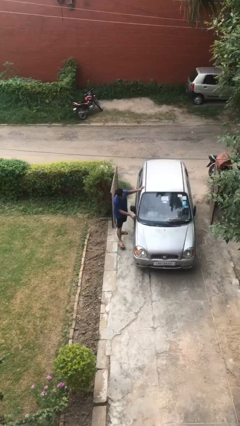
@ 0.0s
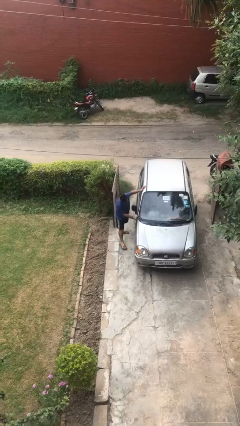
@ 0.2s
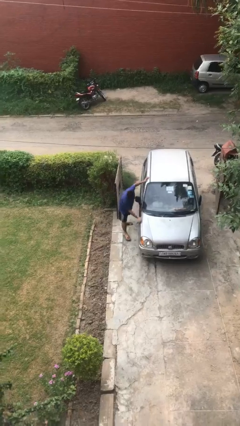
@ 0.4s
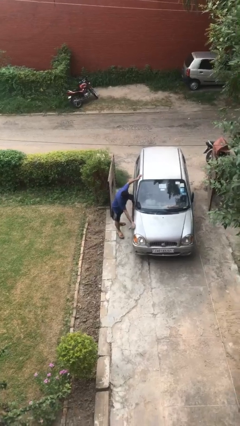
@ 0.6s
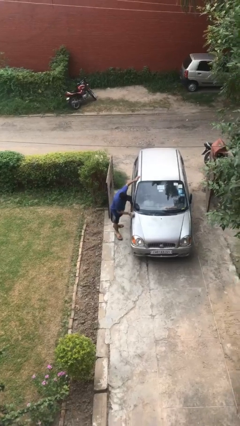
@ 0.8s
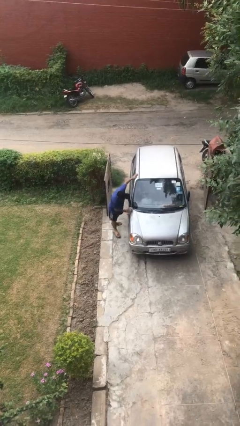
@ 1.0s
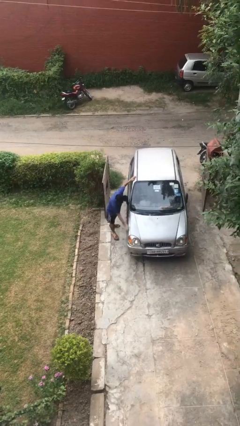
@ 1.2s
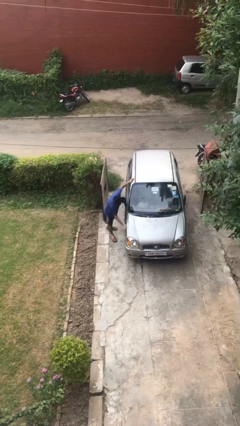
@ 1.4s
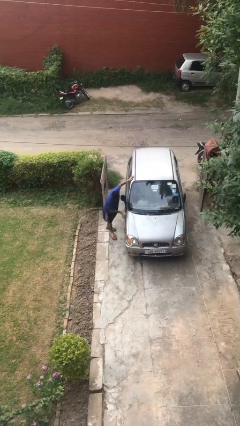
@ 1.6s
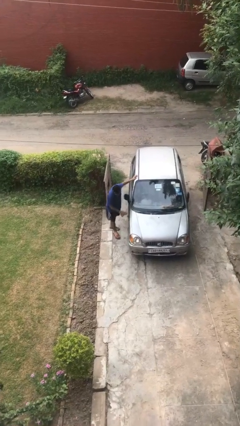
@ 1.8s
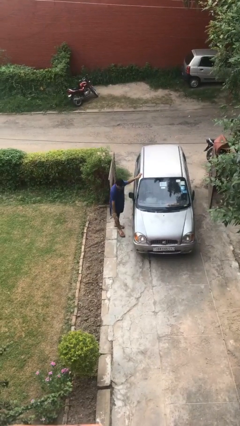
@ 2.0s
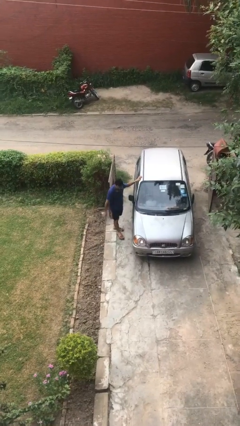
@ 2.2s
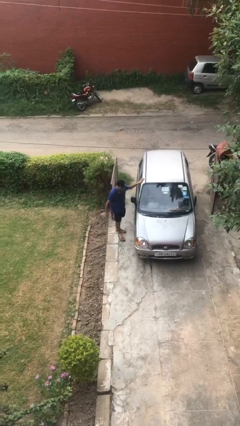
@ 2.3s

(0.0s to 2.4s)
person polishes car with rag

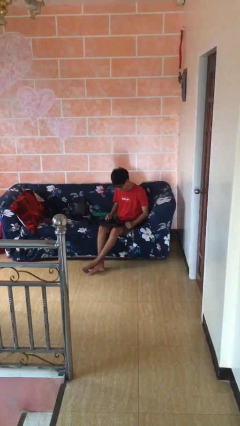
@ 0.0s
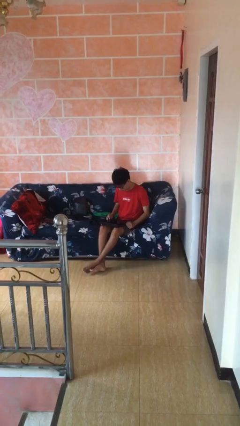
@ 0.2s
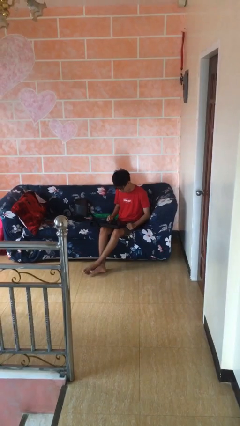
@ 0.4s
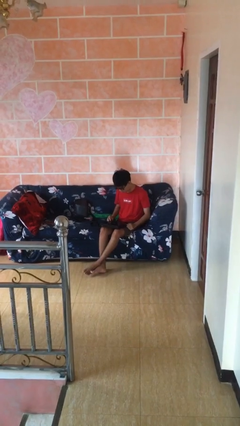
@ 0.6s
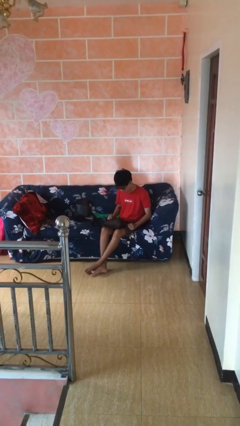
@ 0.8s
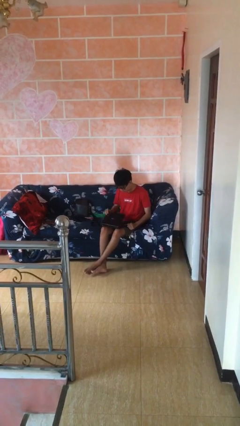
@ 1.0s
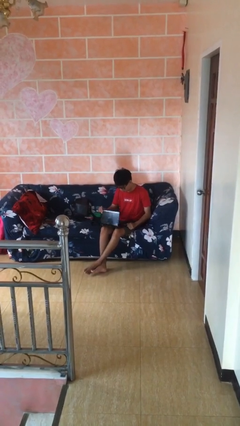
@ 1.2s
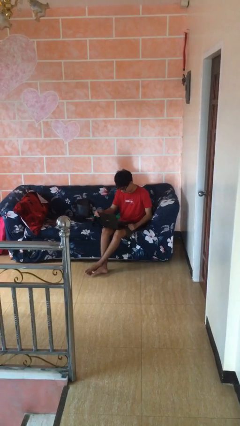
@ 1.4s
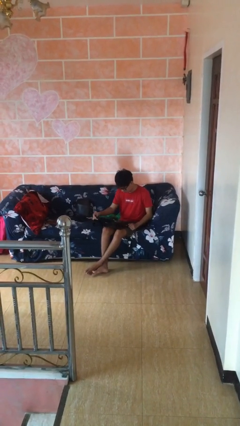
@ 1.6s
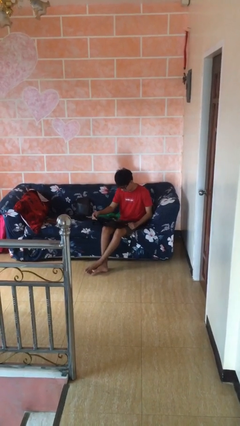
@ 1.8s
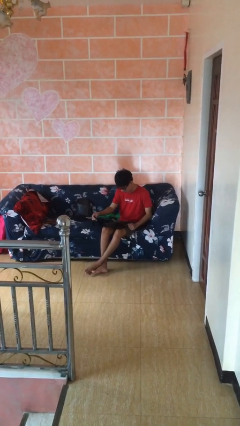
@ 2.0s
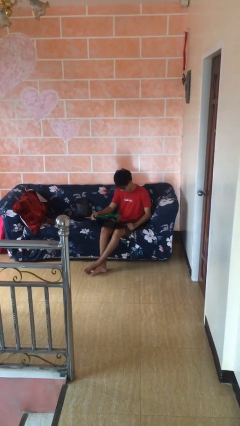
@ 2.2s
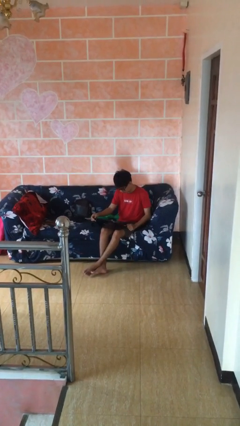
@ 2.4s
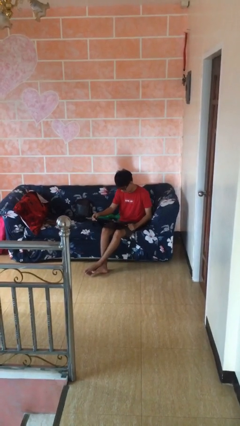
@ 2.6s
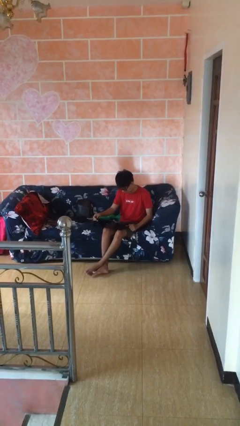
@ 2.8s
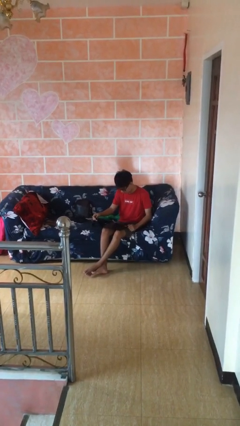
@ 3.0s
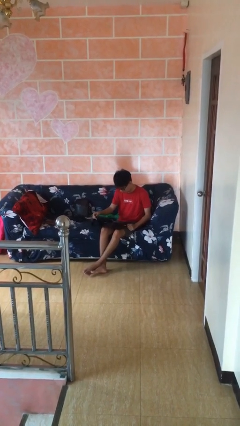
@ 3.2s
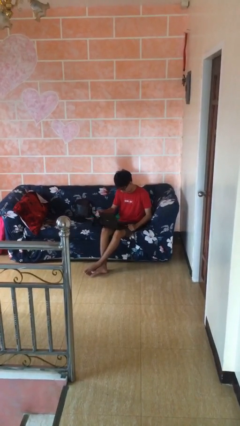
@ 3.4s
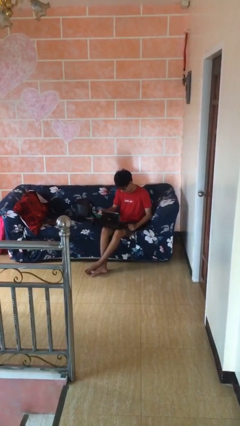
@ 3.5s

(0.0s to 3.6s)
person interacts with laptop

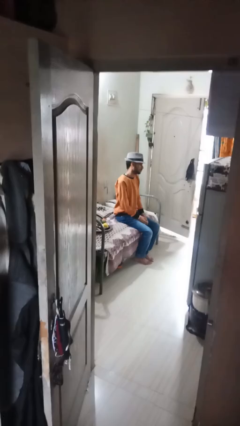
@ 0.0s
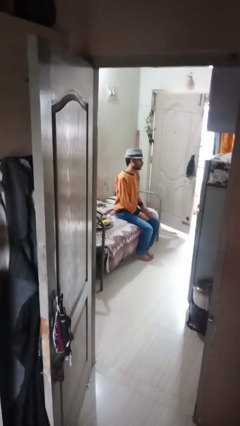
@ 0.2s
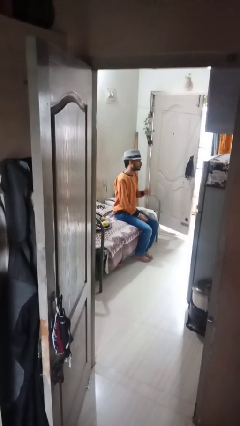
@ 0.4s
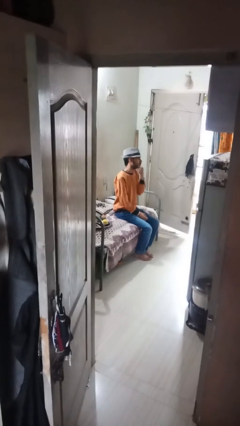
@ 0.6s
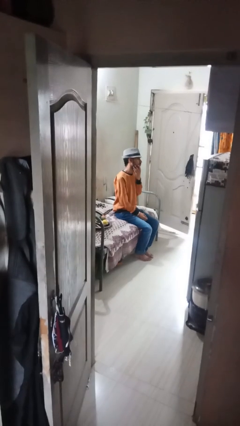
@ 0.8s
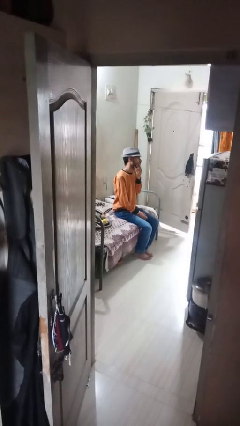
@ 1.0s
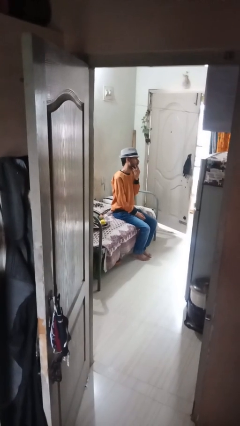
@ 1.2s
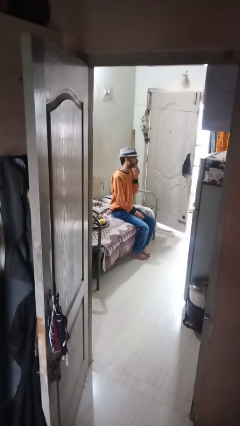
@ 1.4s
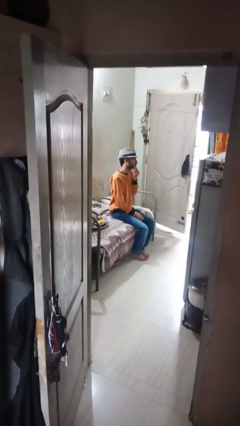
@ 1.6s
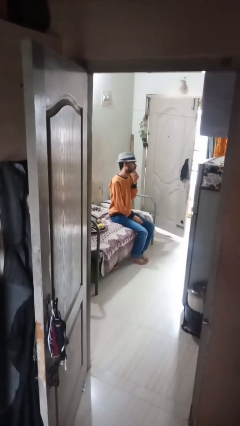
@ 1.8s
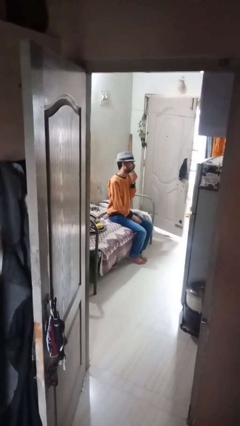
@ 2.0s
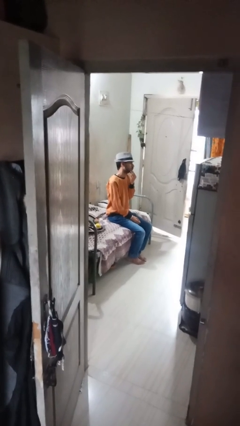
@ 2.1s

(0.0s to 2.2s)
person strokes chin

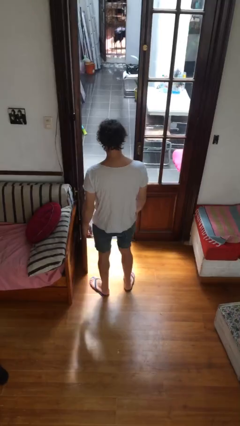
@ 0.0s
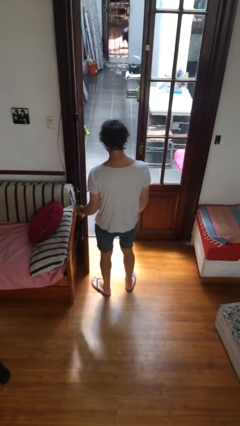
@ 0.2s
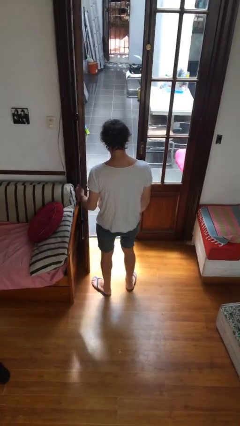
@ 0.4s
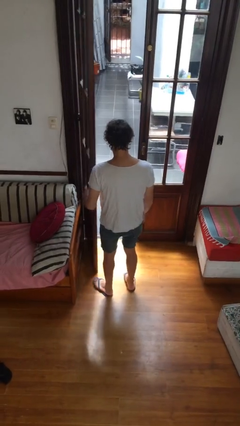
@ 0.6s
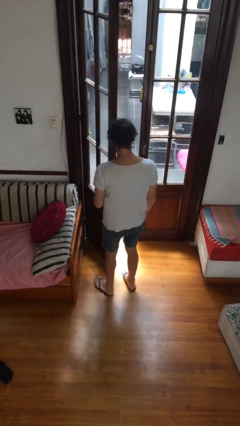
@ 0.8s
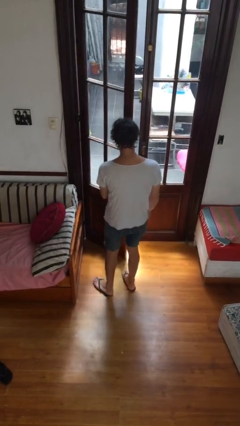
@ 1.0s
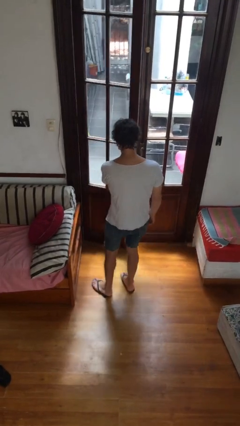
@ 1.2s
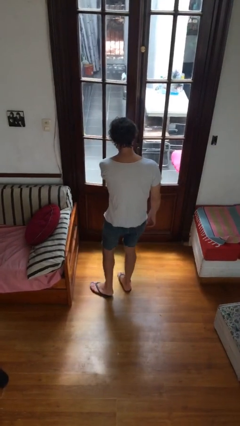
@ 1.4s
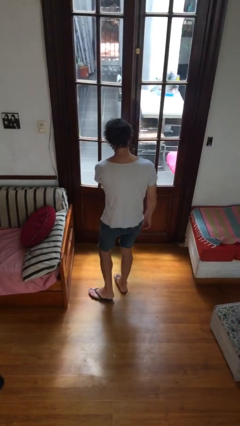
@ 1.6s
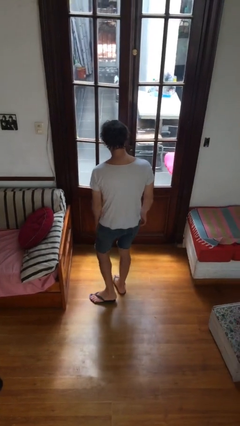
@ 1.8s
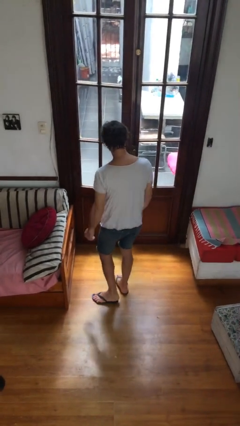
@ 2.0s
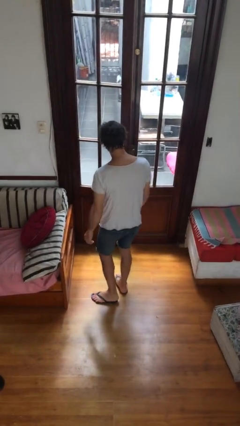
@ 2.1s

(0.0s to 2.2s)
person closes facility door

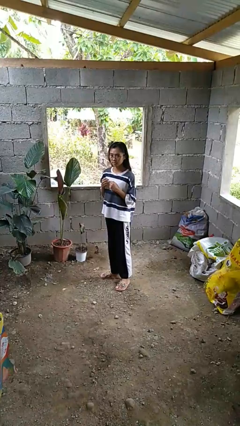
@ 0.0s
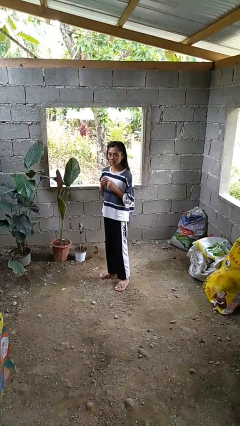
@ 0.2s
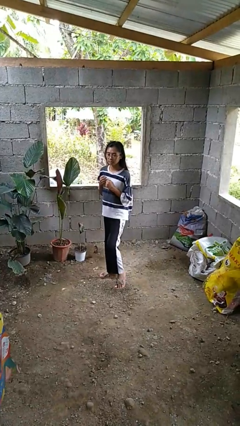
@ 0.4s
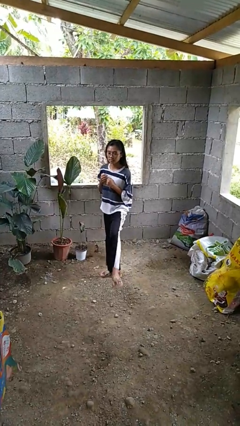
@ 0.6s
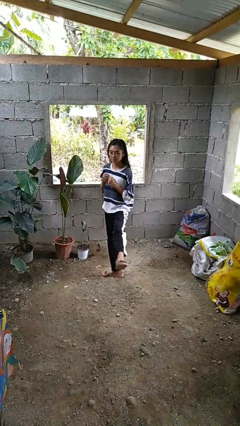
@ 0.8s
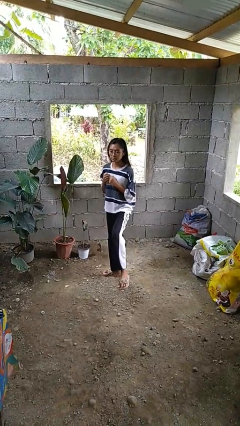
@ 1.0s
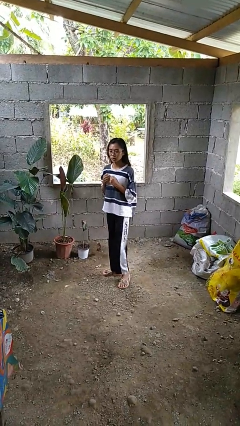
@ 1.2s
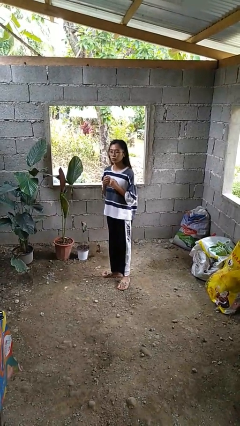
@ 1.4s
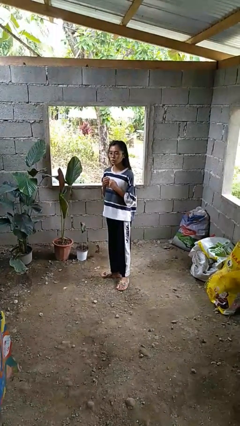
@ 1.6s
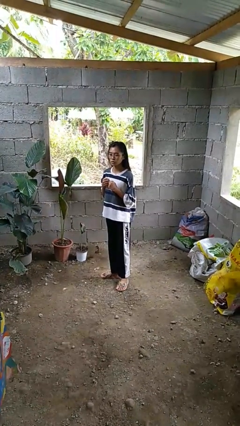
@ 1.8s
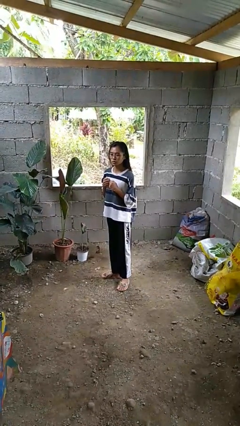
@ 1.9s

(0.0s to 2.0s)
person karate kicks

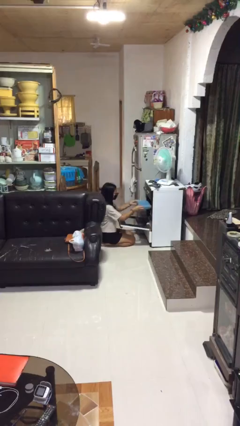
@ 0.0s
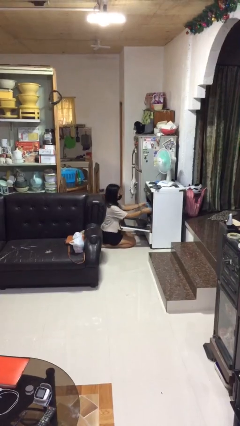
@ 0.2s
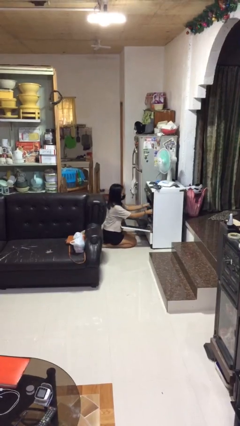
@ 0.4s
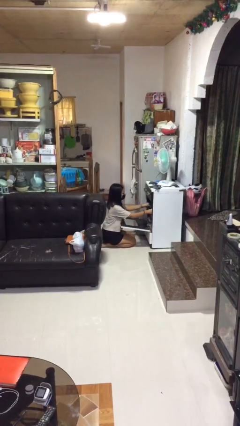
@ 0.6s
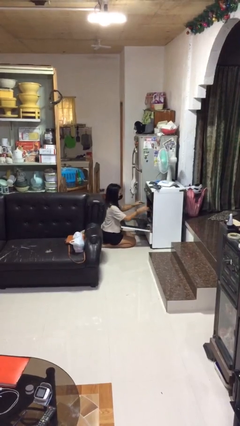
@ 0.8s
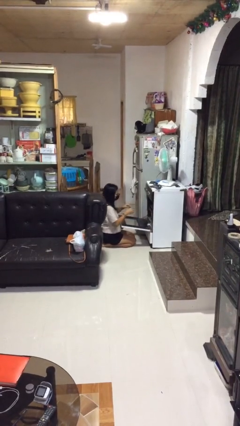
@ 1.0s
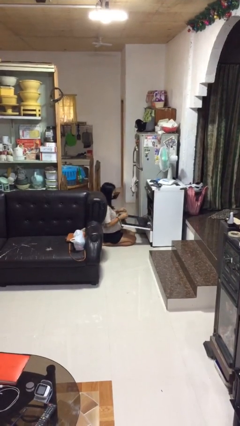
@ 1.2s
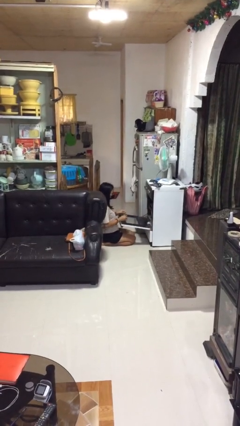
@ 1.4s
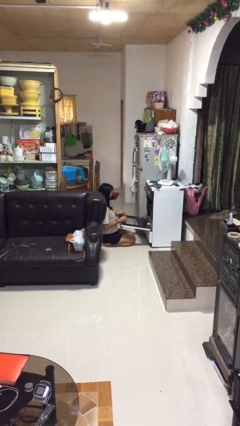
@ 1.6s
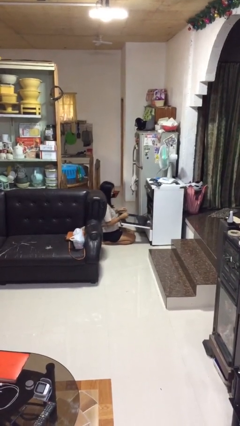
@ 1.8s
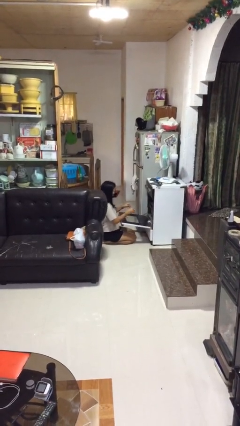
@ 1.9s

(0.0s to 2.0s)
person puts object into oven

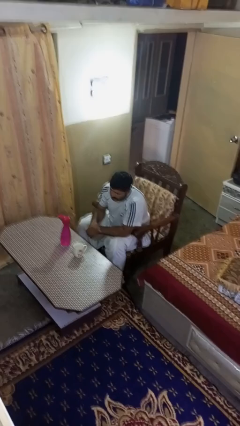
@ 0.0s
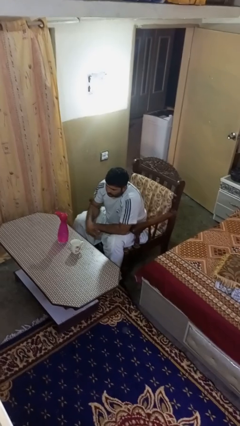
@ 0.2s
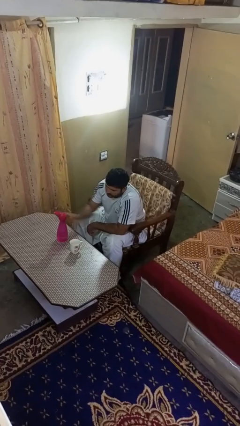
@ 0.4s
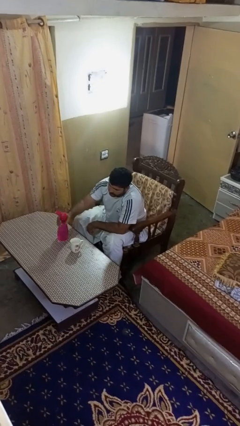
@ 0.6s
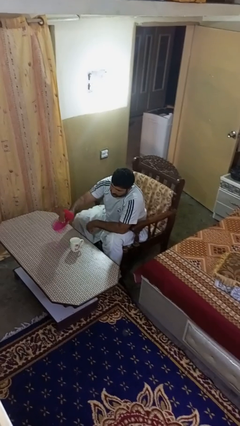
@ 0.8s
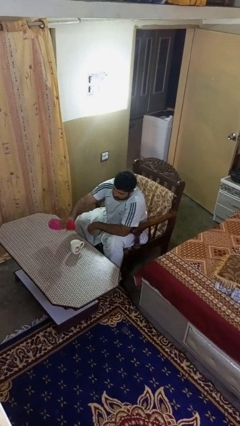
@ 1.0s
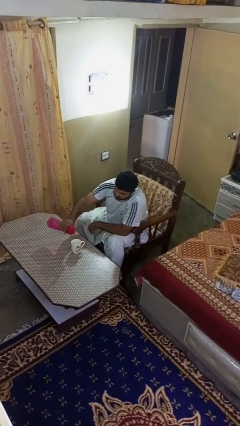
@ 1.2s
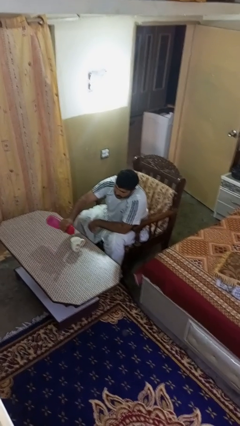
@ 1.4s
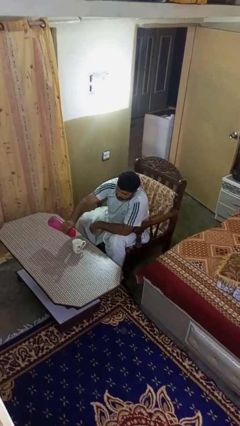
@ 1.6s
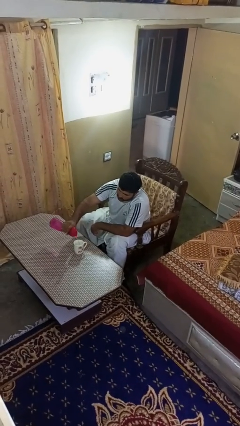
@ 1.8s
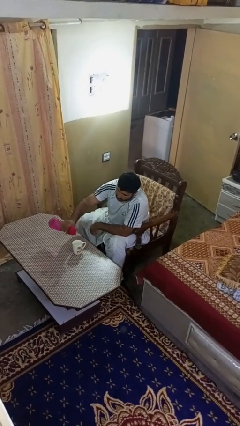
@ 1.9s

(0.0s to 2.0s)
person pours liquid into cup

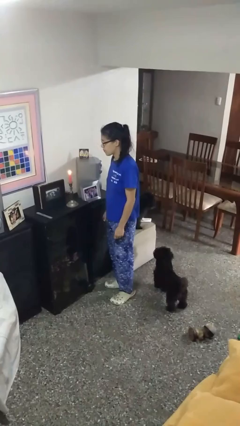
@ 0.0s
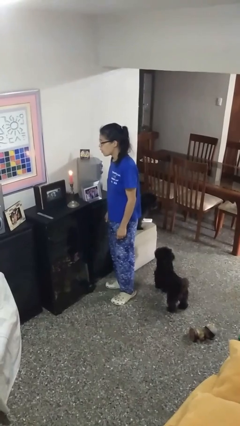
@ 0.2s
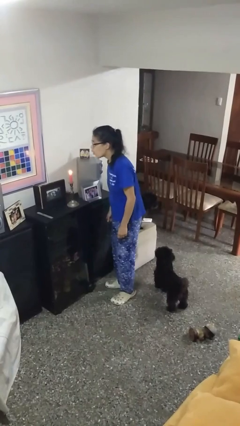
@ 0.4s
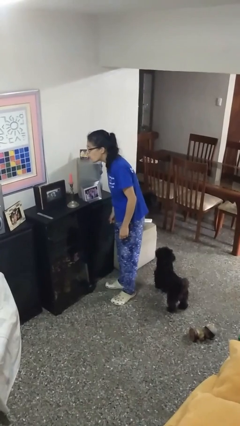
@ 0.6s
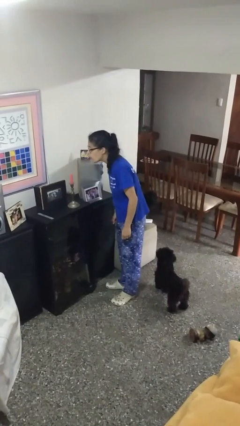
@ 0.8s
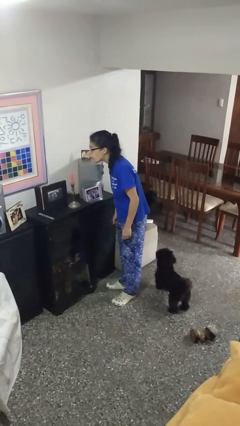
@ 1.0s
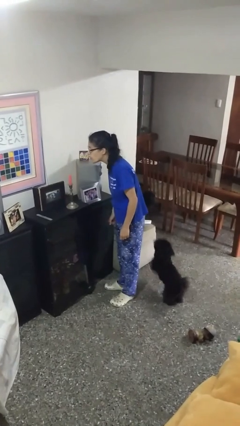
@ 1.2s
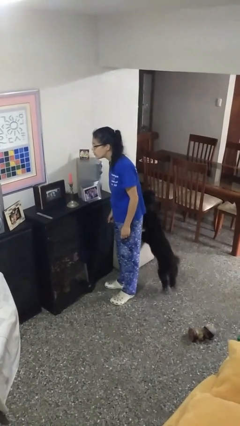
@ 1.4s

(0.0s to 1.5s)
person extinguishes candle
